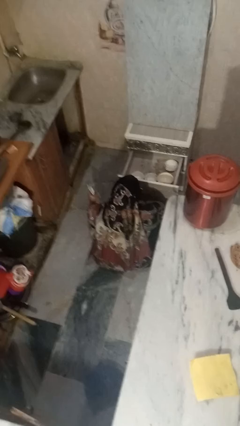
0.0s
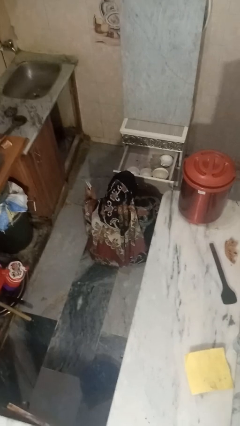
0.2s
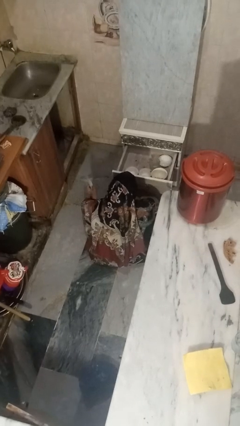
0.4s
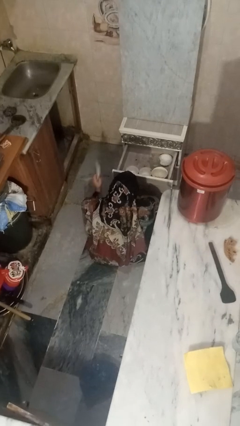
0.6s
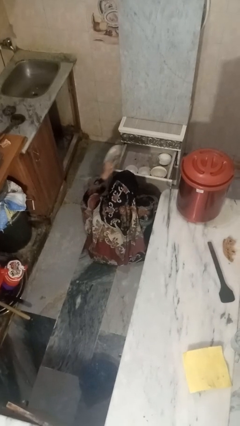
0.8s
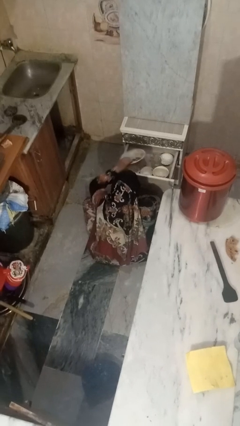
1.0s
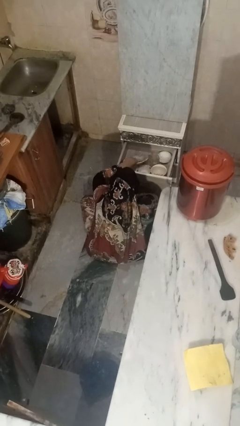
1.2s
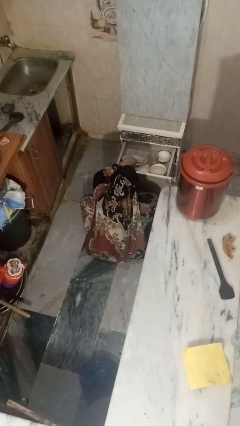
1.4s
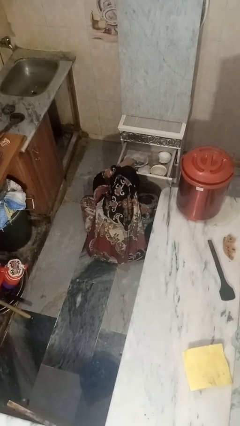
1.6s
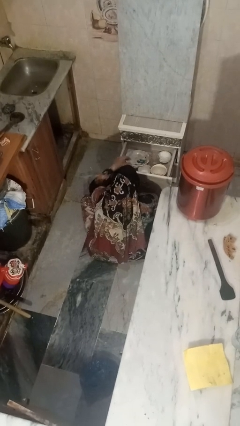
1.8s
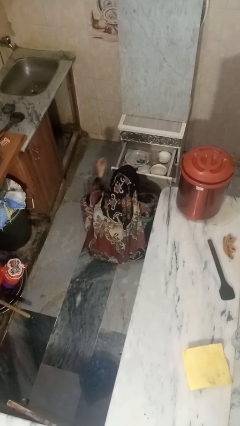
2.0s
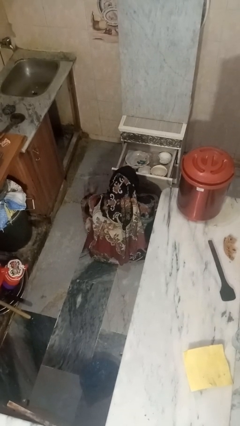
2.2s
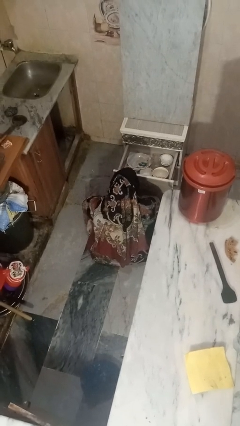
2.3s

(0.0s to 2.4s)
person puts object into kitchen drawer

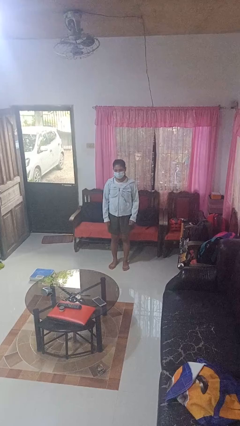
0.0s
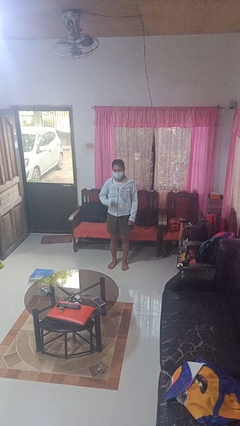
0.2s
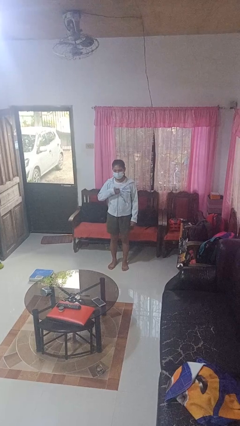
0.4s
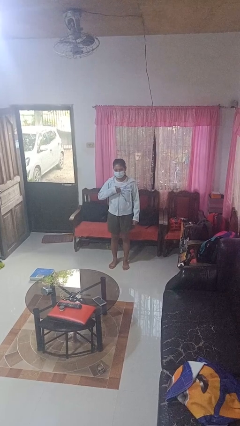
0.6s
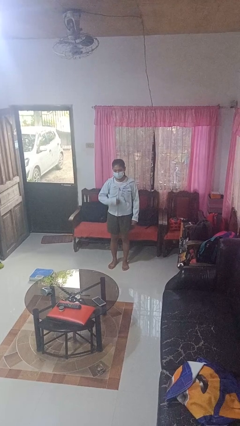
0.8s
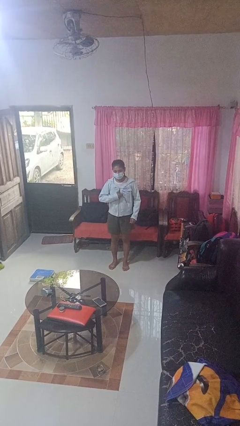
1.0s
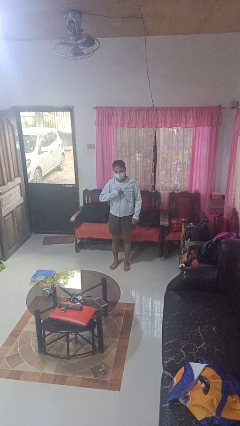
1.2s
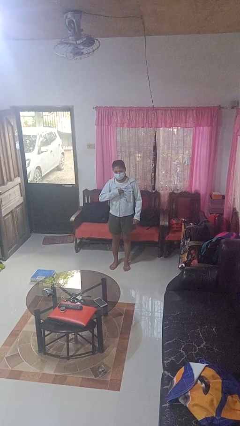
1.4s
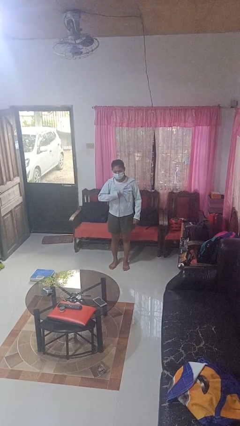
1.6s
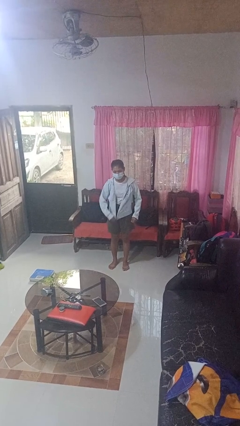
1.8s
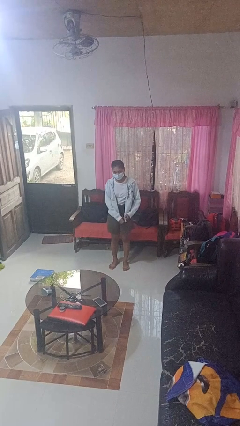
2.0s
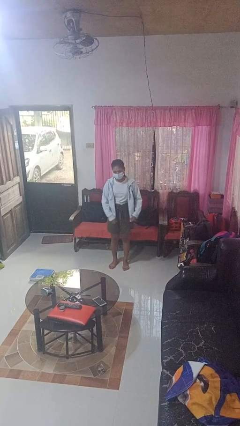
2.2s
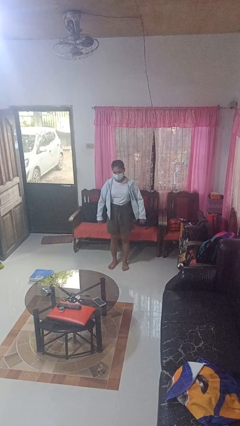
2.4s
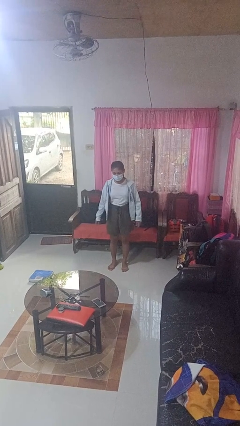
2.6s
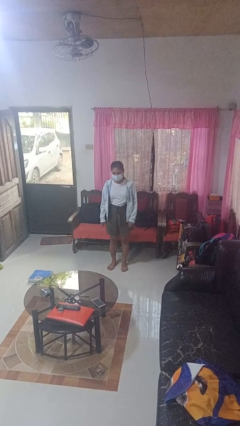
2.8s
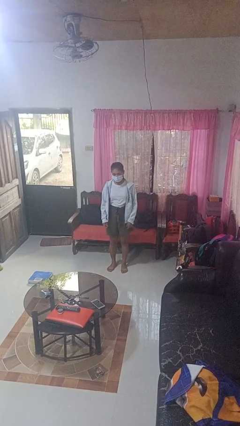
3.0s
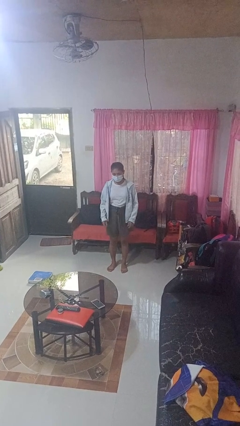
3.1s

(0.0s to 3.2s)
person unzips jacket

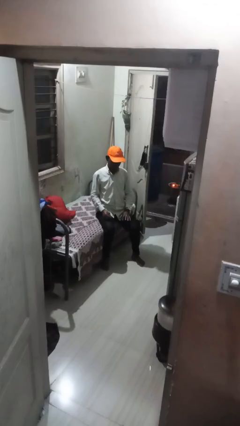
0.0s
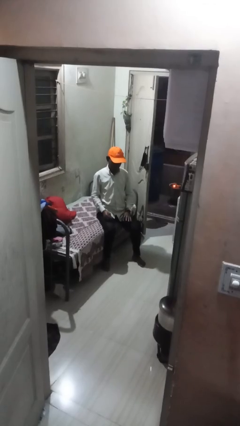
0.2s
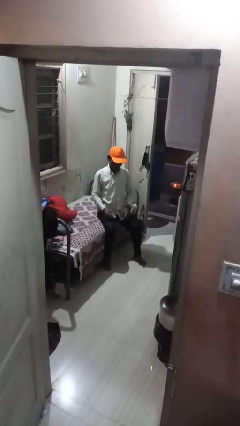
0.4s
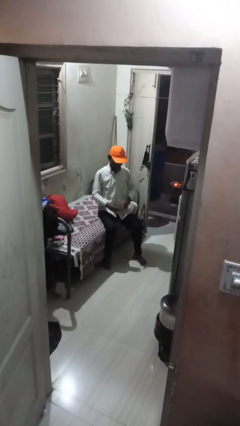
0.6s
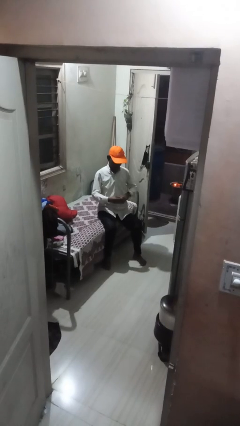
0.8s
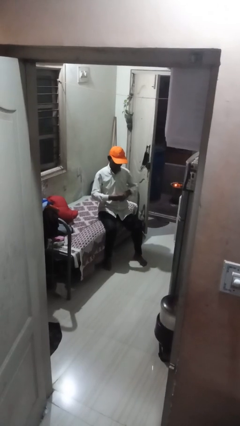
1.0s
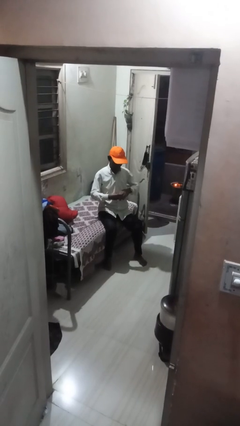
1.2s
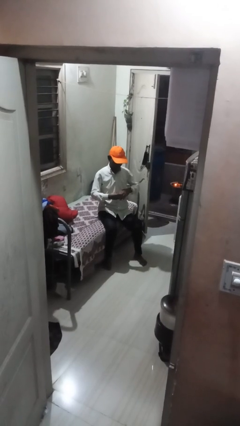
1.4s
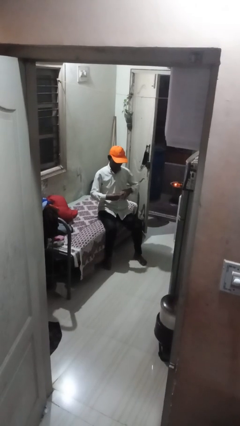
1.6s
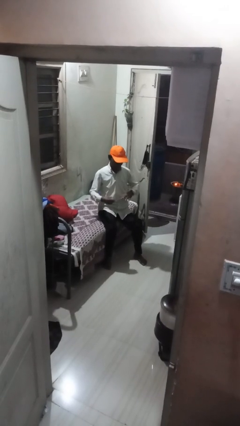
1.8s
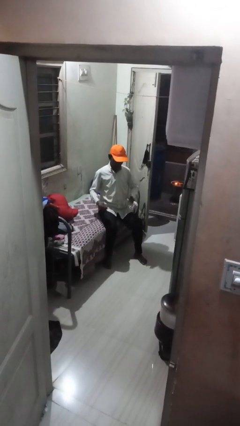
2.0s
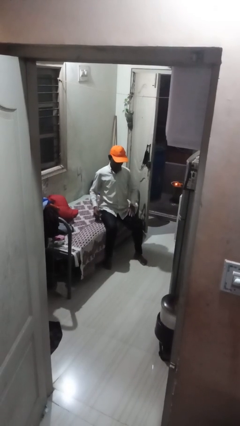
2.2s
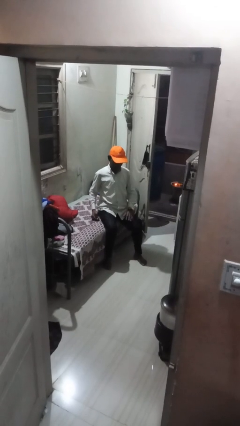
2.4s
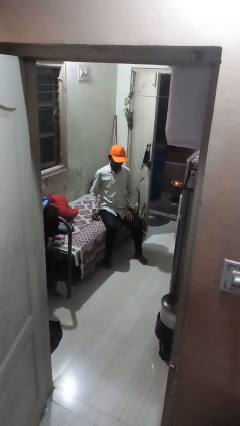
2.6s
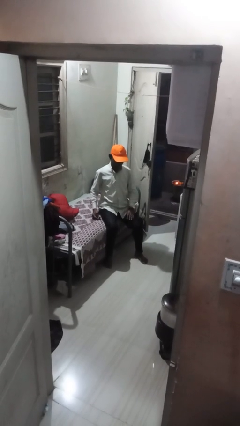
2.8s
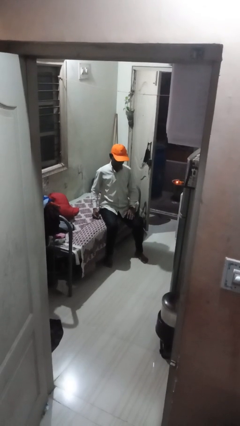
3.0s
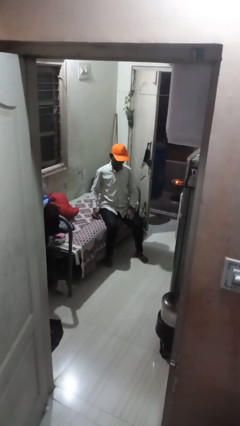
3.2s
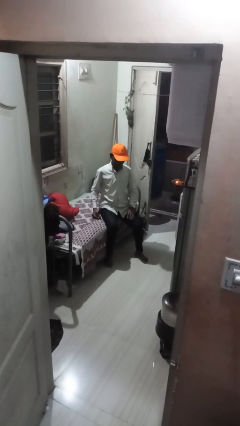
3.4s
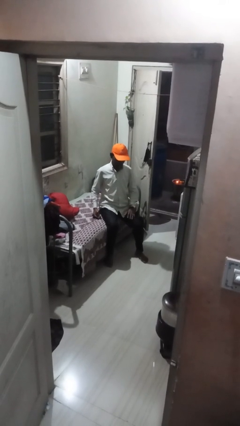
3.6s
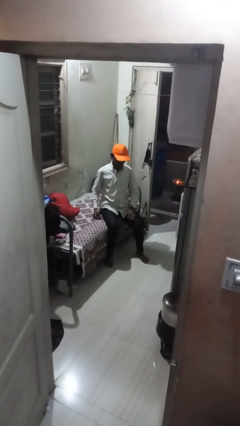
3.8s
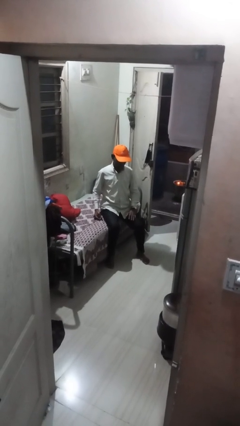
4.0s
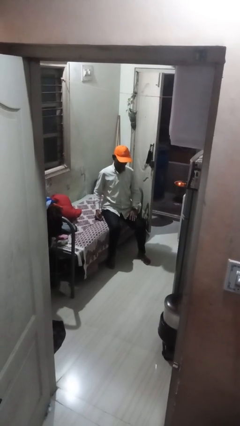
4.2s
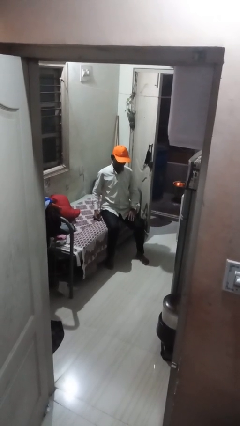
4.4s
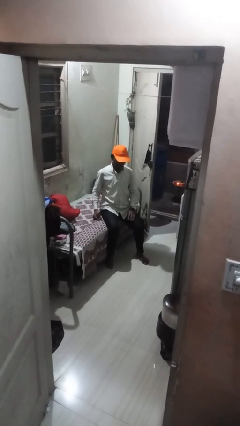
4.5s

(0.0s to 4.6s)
person takes off ring

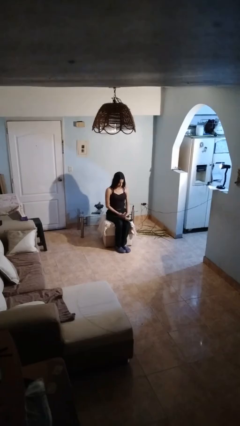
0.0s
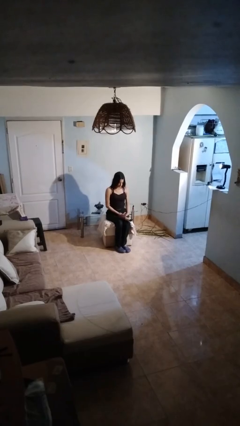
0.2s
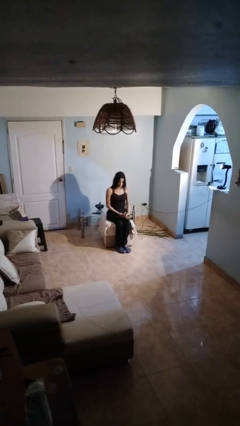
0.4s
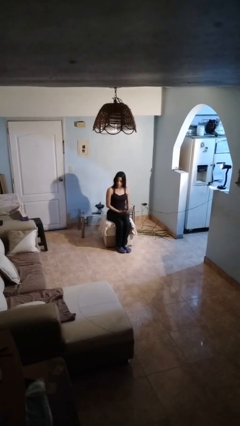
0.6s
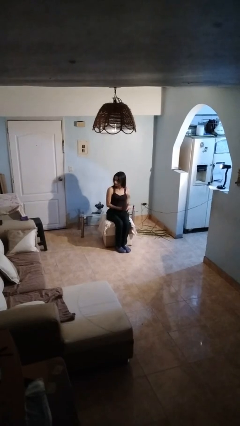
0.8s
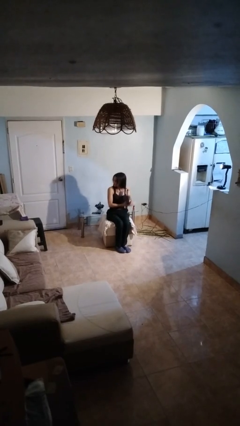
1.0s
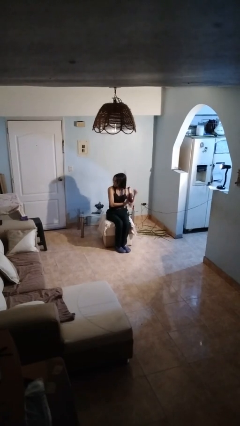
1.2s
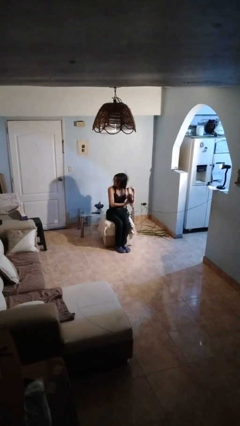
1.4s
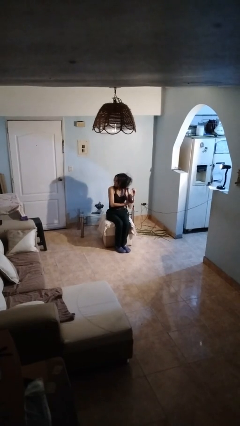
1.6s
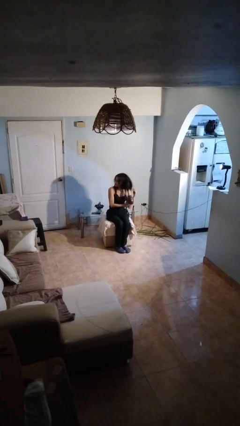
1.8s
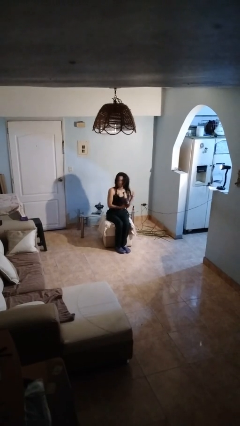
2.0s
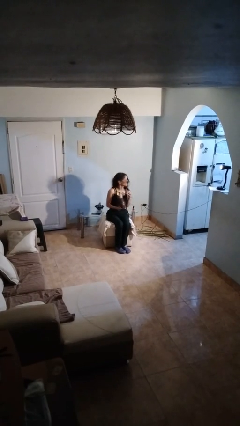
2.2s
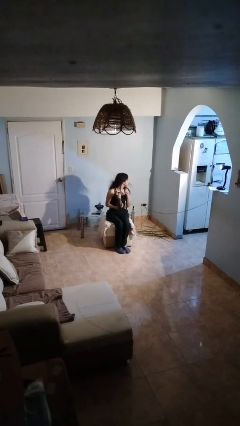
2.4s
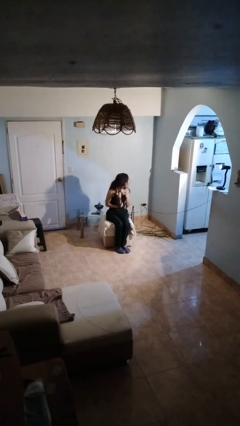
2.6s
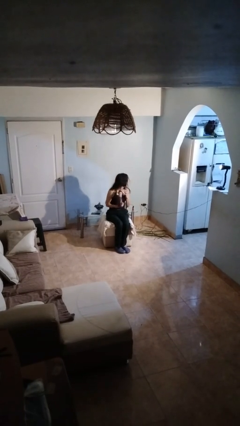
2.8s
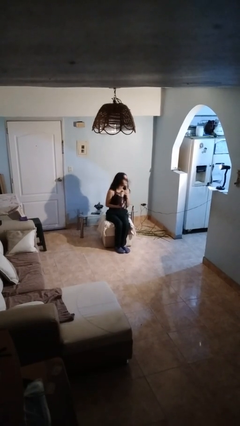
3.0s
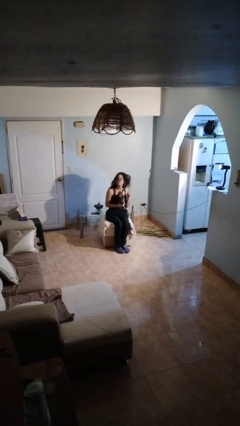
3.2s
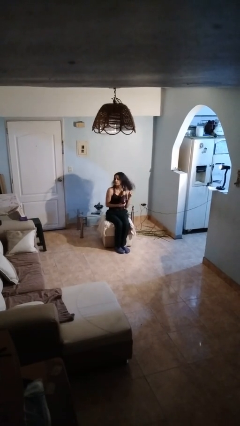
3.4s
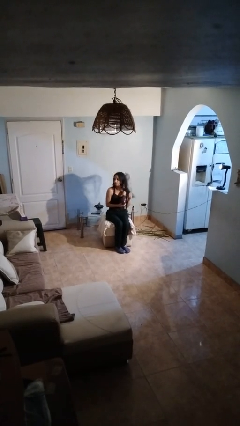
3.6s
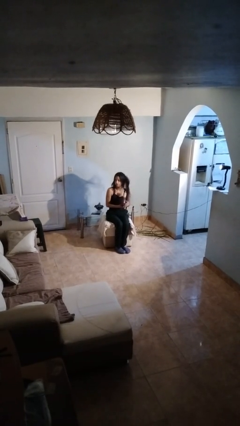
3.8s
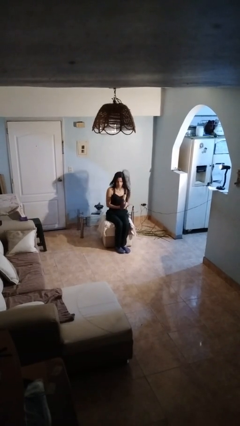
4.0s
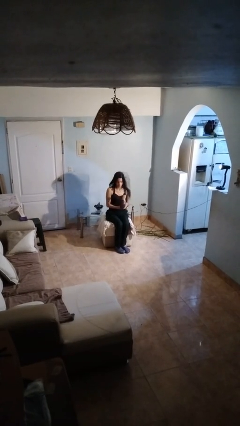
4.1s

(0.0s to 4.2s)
person dries hair with hairdryer

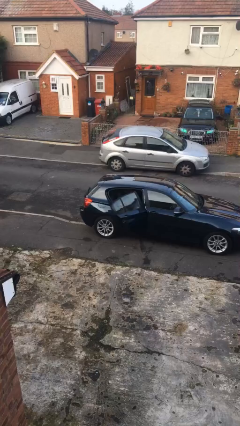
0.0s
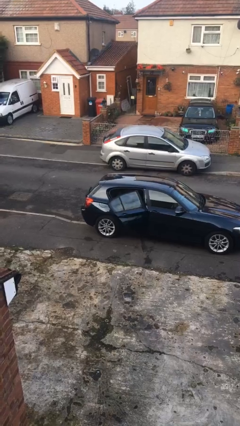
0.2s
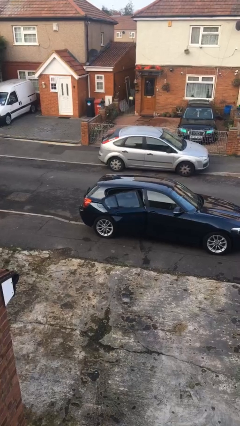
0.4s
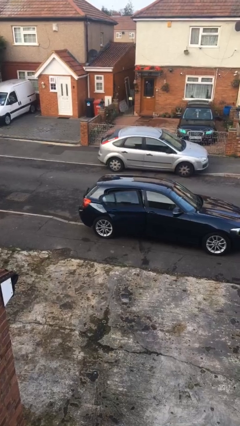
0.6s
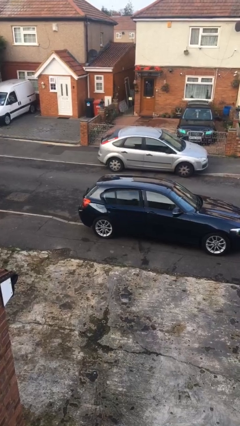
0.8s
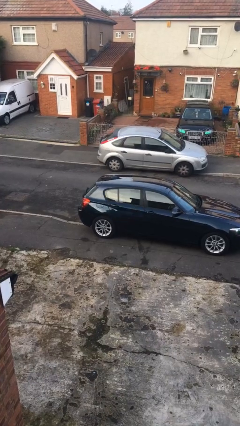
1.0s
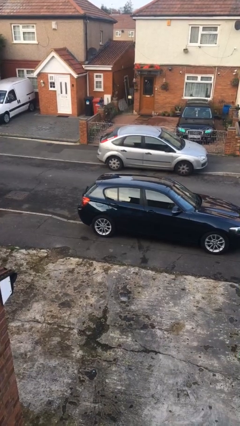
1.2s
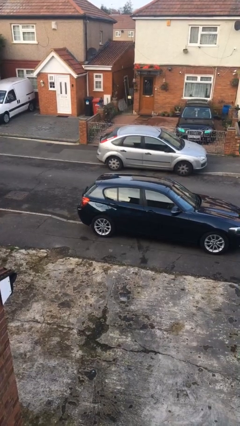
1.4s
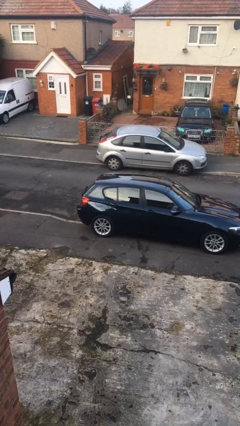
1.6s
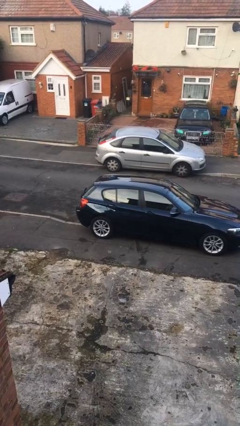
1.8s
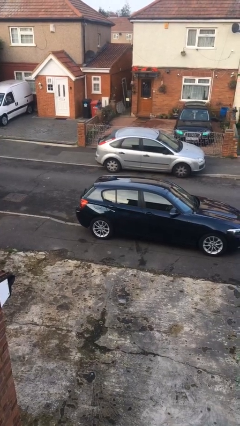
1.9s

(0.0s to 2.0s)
person closes car door

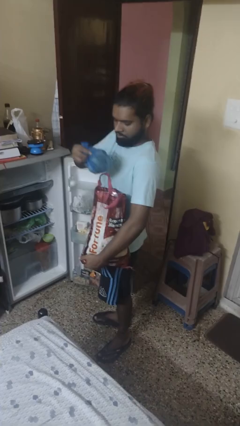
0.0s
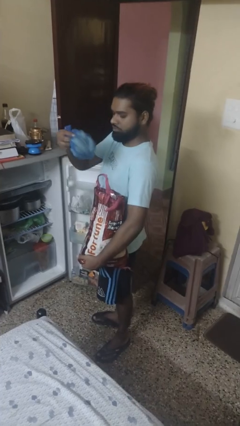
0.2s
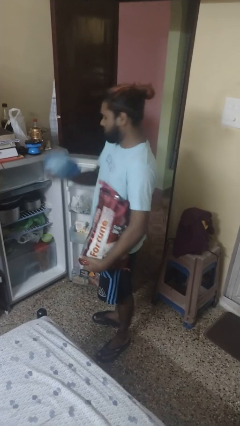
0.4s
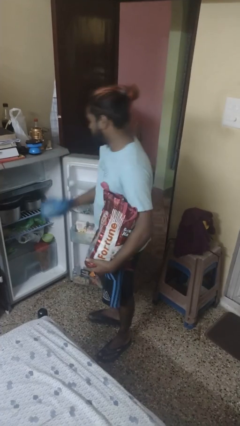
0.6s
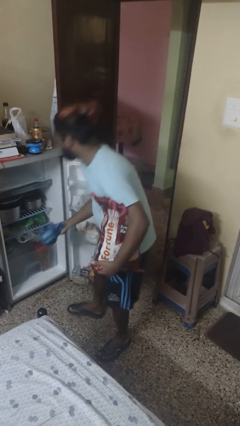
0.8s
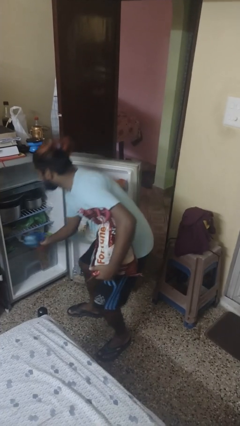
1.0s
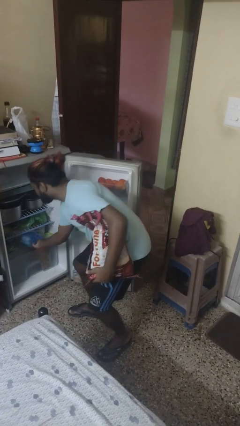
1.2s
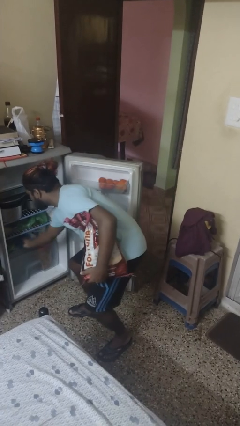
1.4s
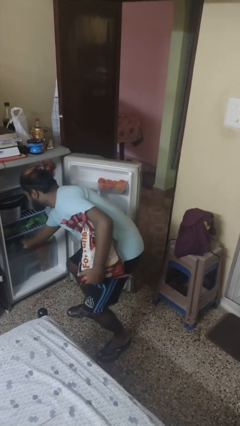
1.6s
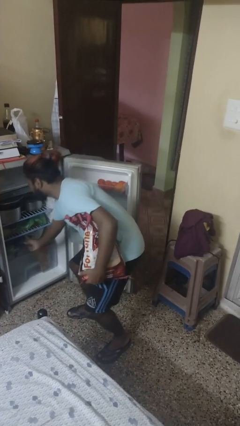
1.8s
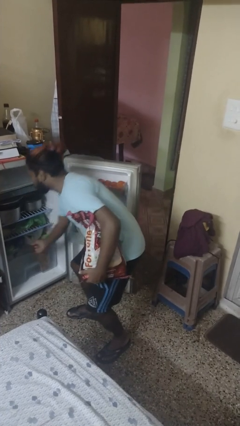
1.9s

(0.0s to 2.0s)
person loads groceries into refrigerator
